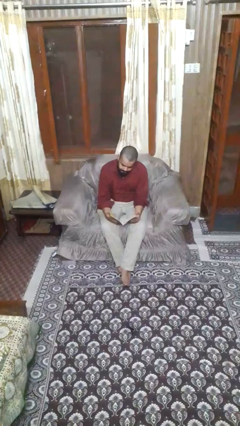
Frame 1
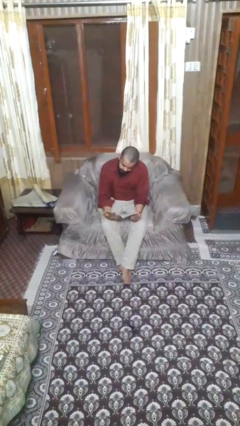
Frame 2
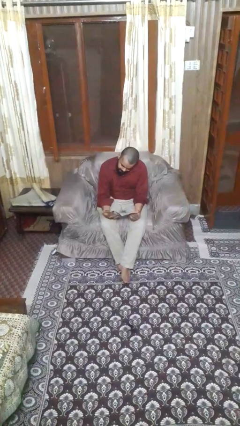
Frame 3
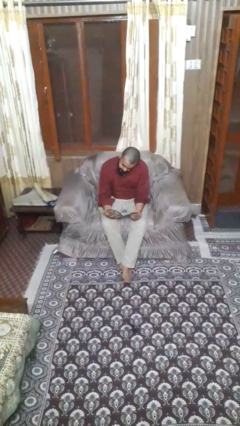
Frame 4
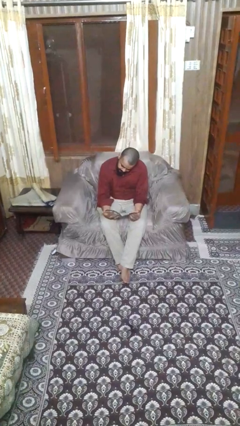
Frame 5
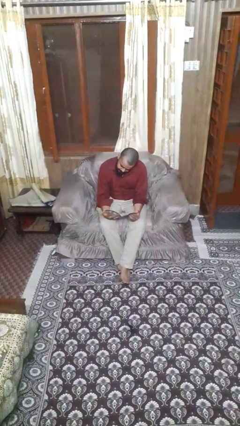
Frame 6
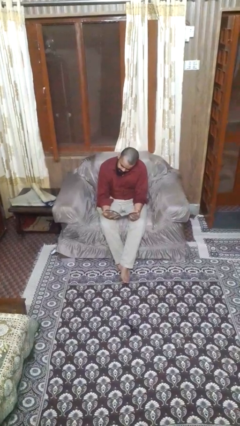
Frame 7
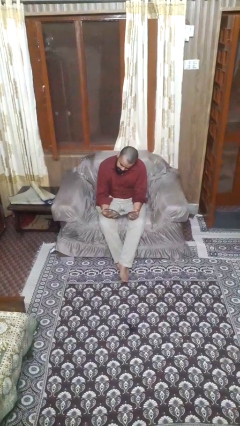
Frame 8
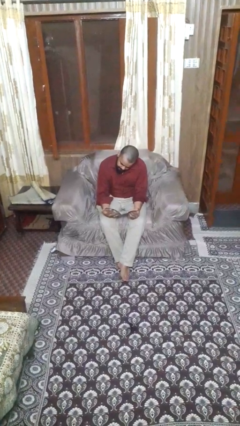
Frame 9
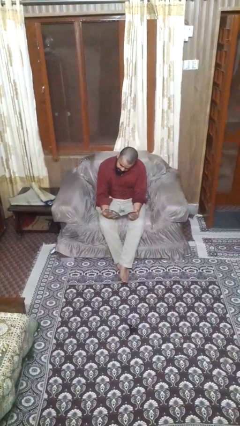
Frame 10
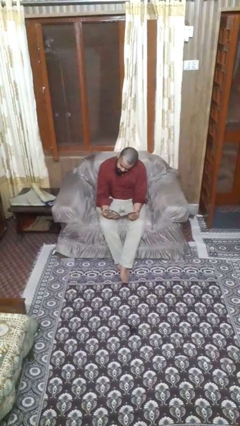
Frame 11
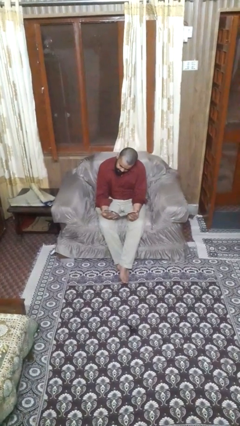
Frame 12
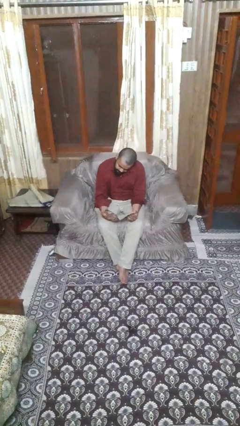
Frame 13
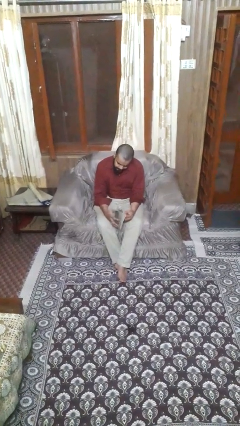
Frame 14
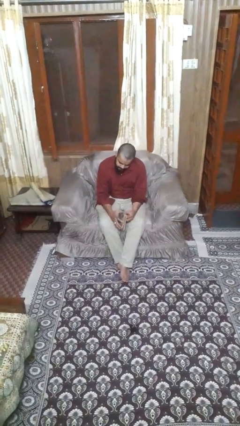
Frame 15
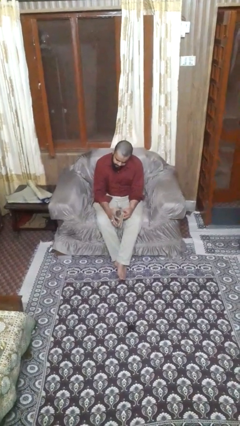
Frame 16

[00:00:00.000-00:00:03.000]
person reads magazine

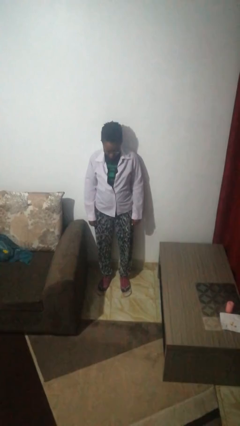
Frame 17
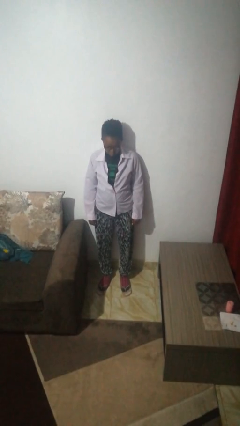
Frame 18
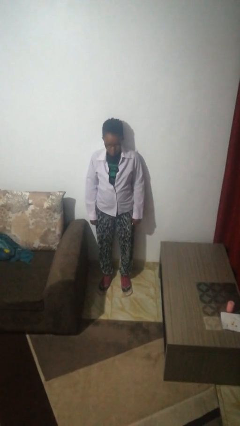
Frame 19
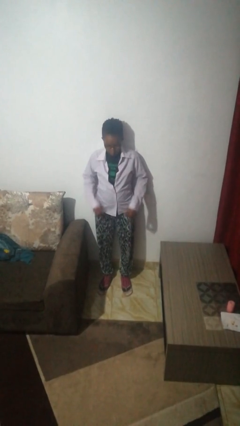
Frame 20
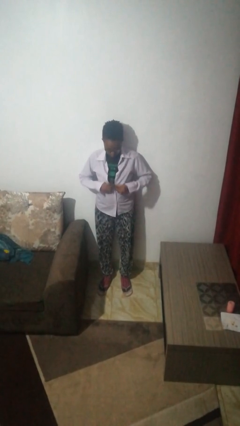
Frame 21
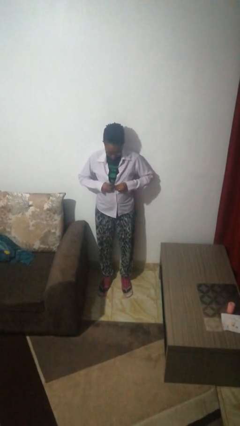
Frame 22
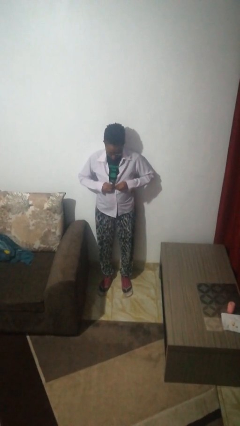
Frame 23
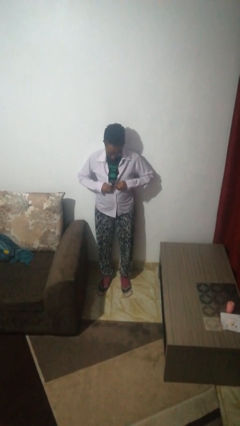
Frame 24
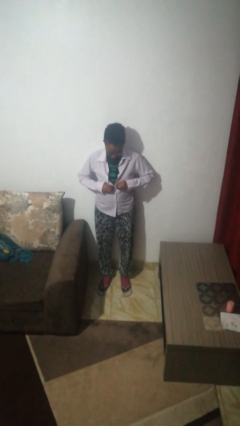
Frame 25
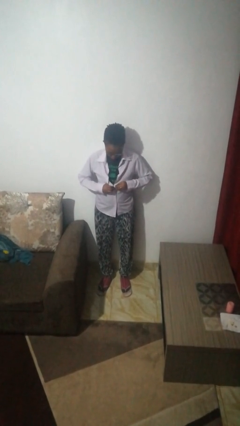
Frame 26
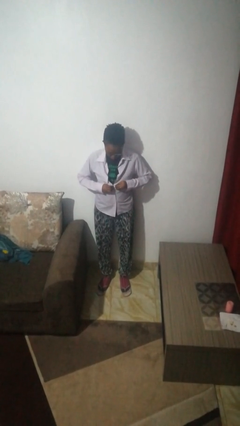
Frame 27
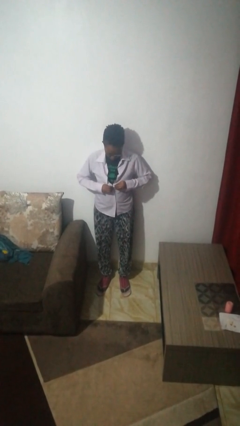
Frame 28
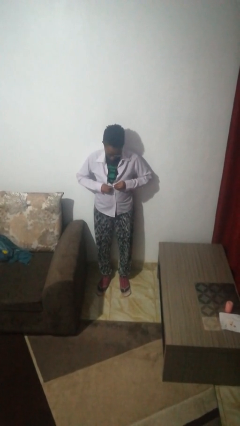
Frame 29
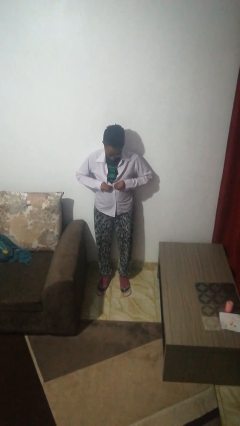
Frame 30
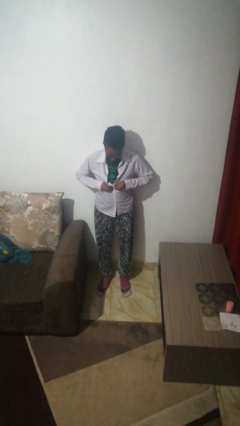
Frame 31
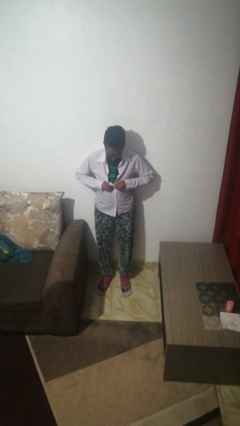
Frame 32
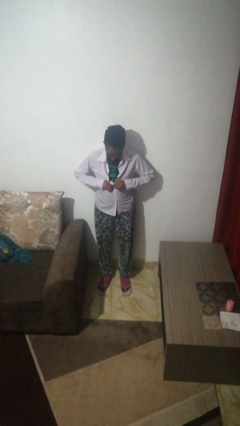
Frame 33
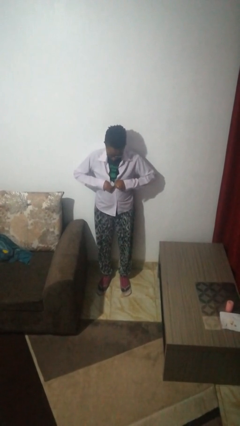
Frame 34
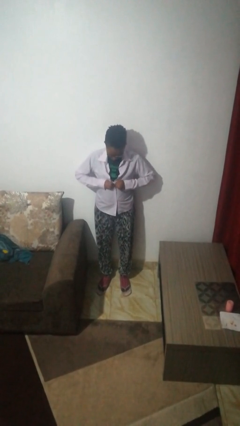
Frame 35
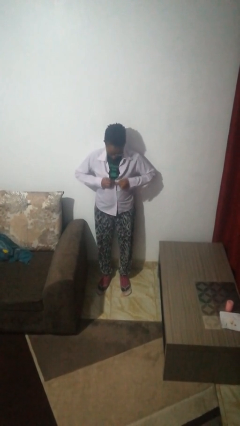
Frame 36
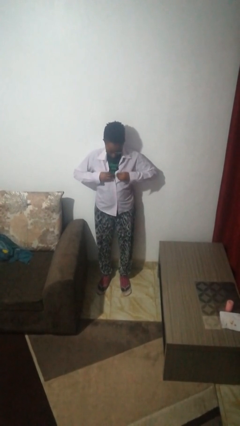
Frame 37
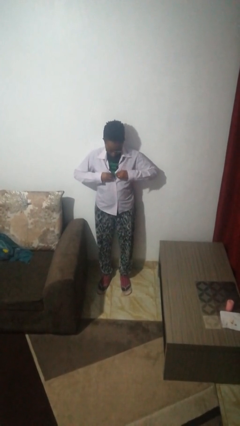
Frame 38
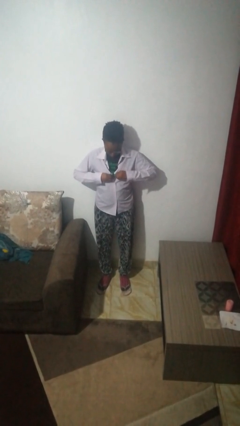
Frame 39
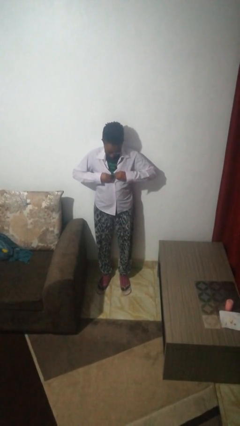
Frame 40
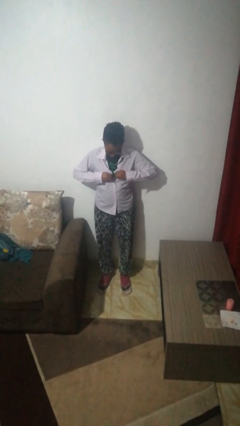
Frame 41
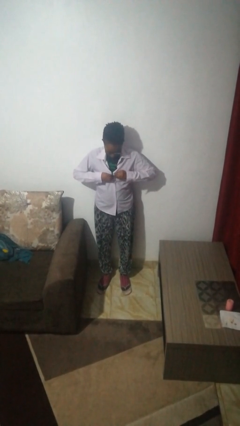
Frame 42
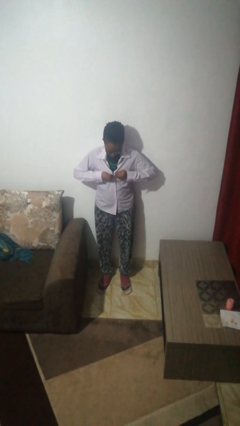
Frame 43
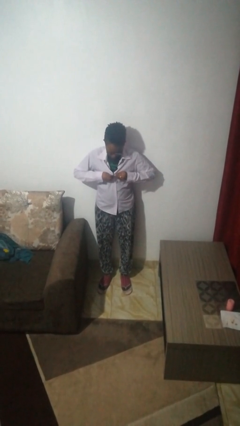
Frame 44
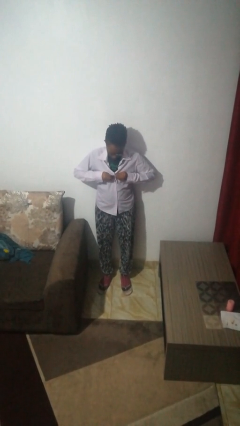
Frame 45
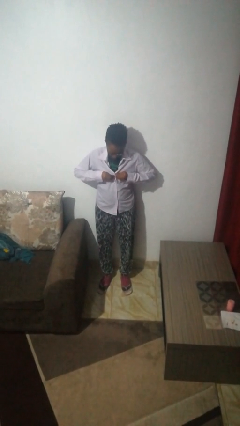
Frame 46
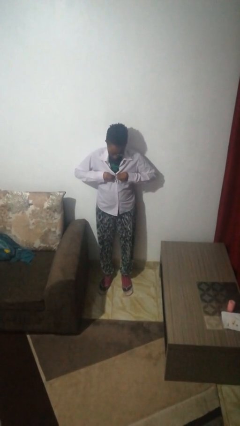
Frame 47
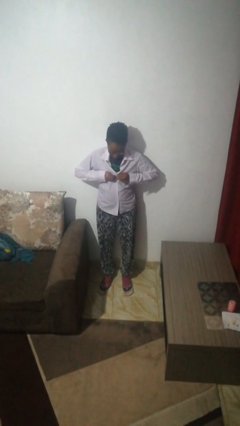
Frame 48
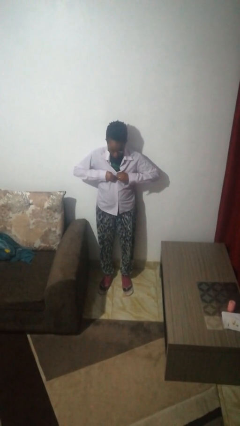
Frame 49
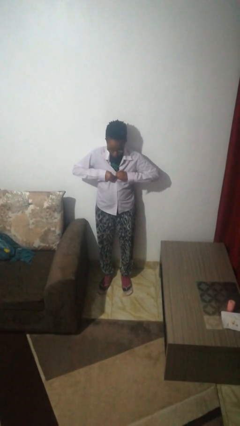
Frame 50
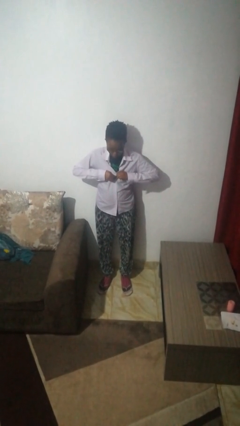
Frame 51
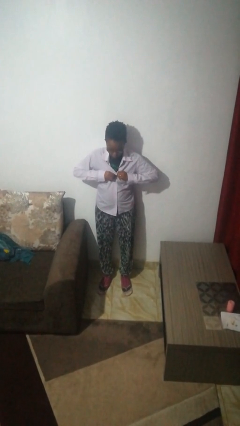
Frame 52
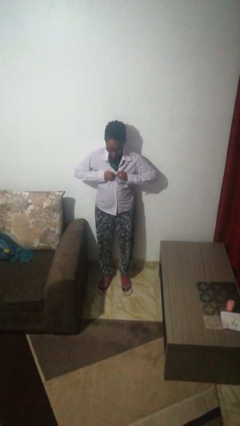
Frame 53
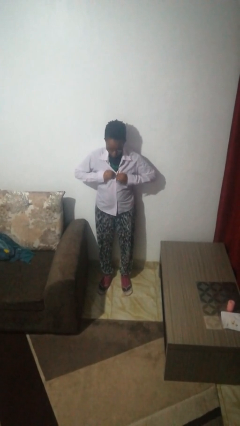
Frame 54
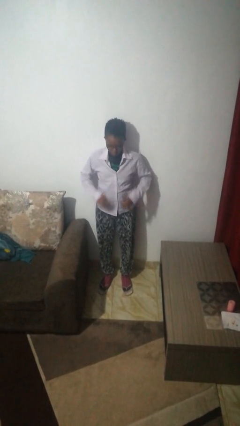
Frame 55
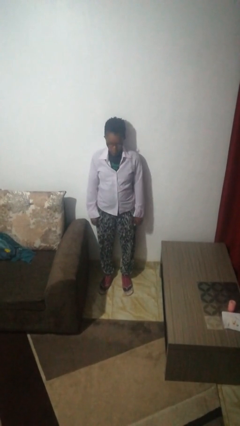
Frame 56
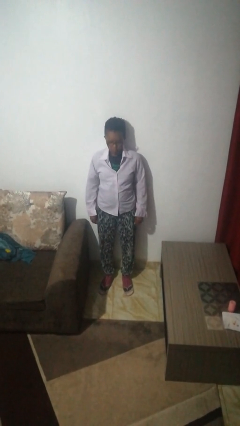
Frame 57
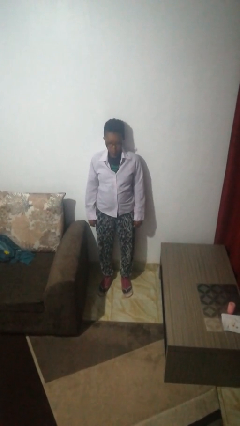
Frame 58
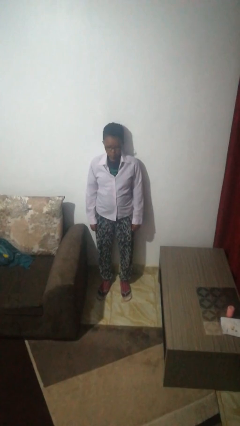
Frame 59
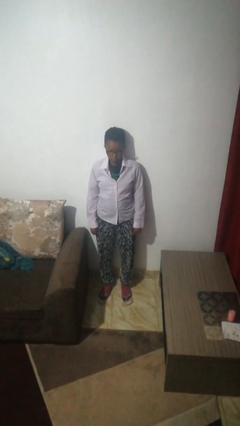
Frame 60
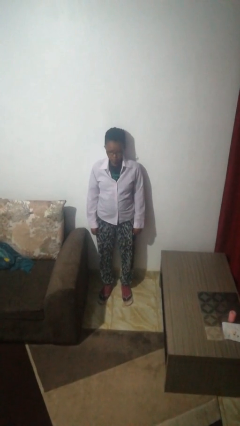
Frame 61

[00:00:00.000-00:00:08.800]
person buttons shirt

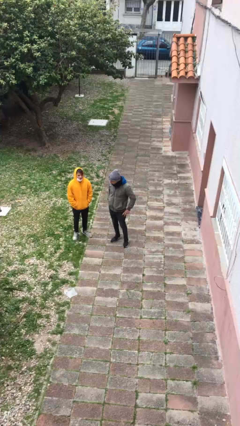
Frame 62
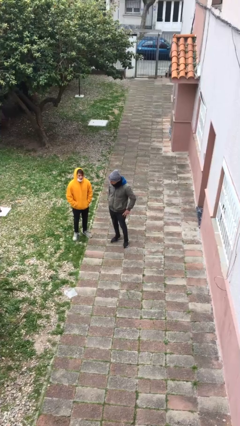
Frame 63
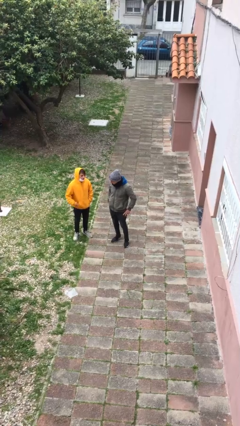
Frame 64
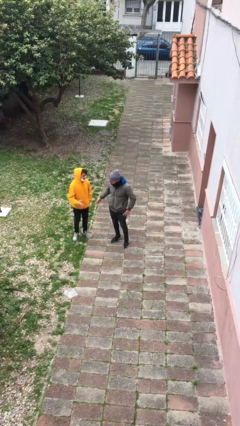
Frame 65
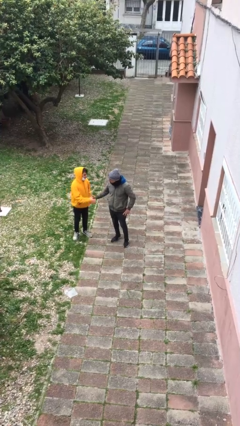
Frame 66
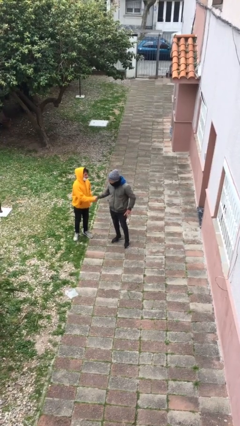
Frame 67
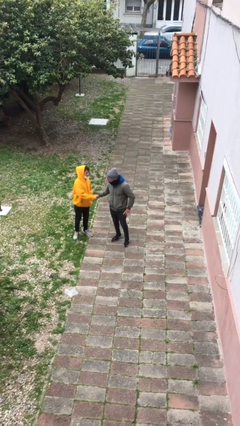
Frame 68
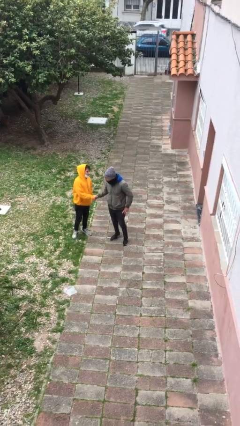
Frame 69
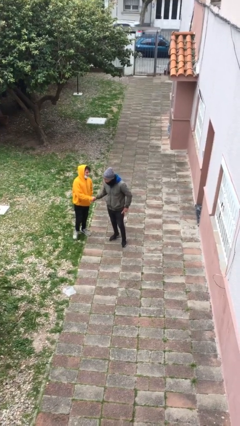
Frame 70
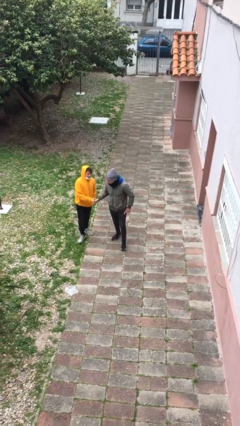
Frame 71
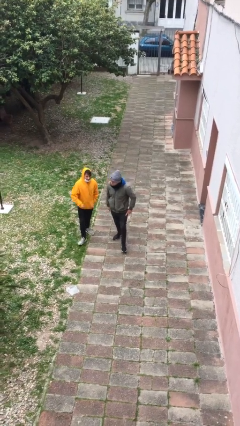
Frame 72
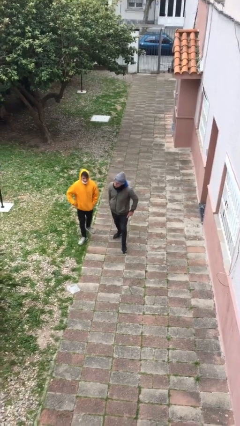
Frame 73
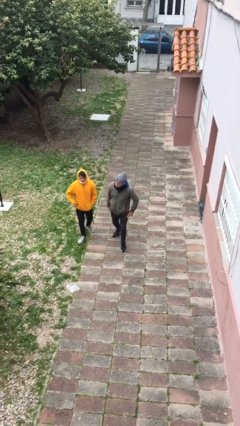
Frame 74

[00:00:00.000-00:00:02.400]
person shakes hand

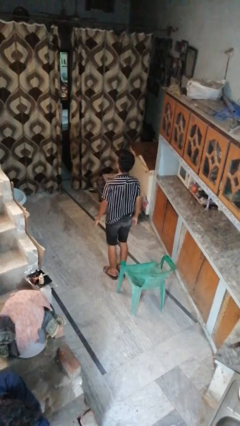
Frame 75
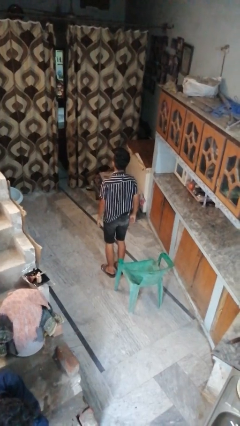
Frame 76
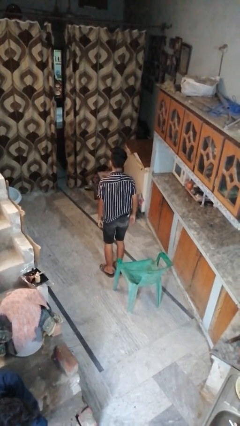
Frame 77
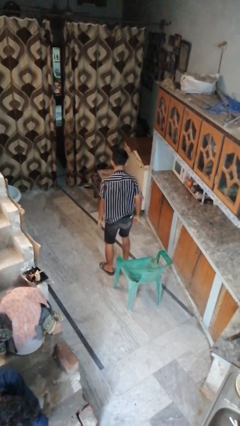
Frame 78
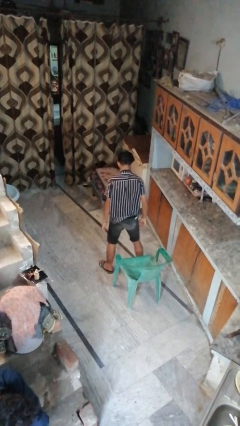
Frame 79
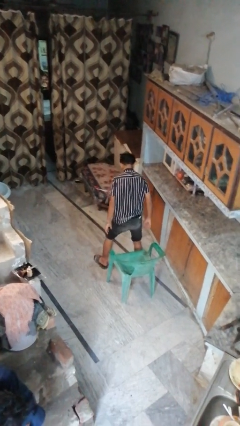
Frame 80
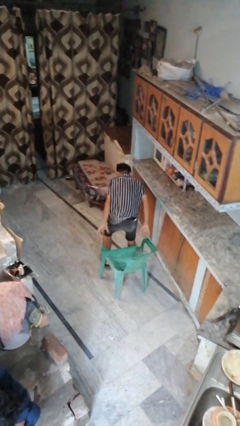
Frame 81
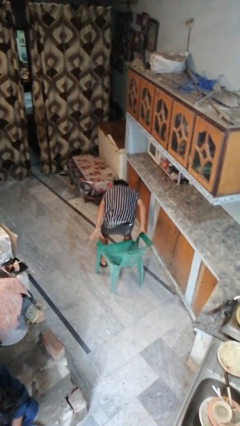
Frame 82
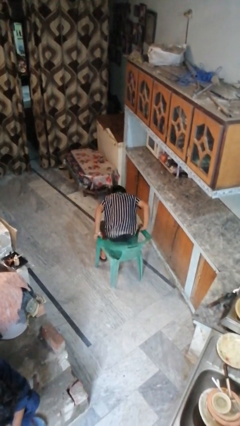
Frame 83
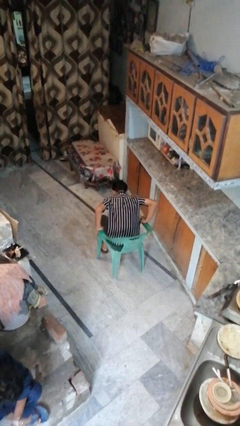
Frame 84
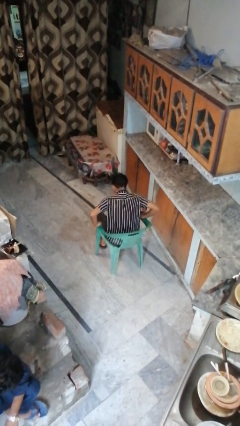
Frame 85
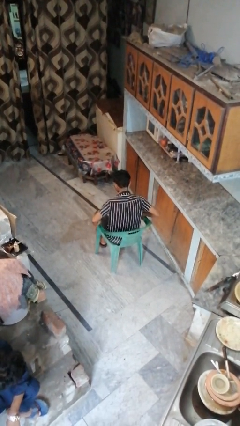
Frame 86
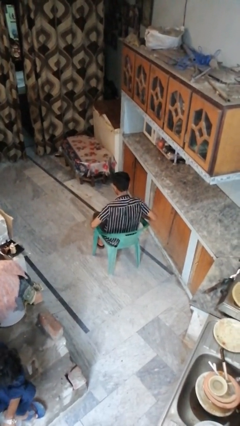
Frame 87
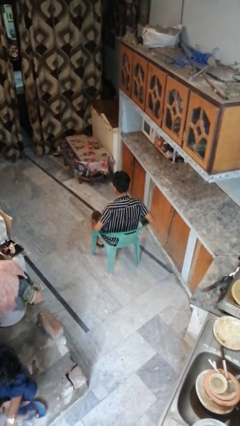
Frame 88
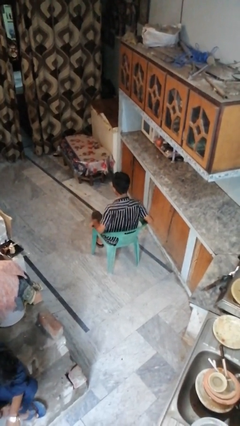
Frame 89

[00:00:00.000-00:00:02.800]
person sits down

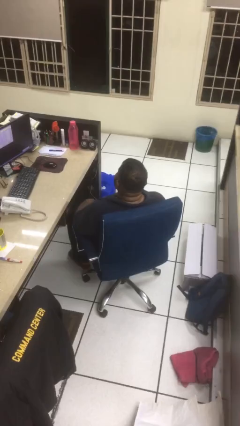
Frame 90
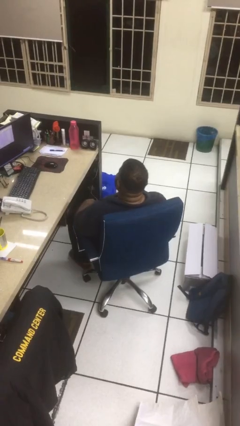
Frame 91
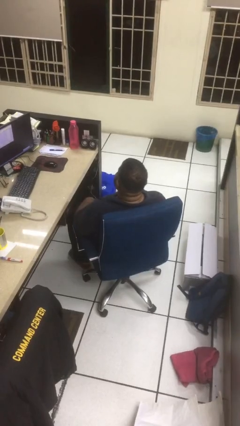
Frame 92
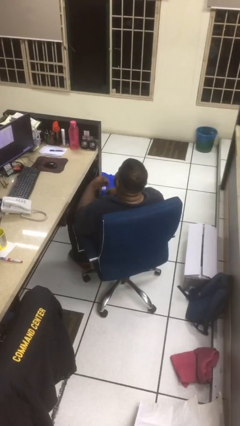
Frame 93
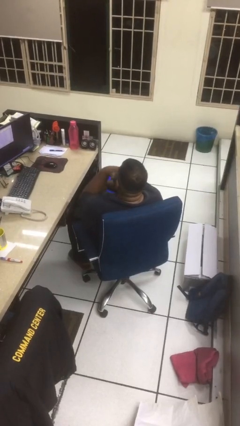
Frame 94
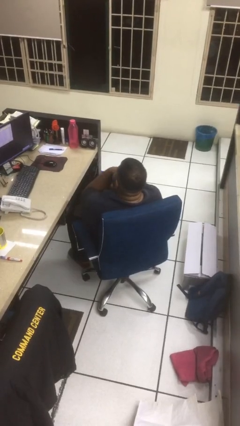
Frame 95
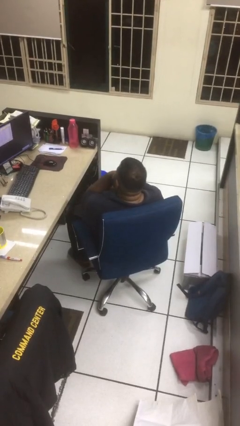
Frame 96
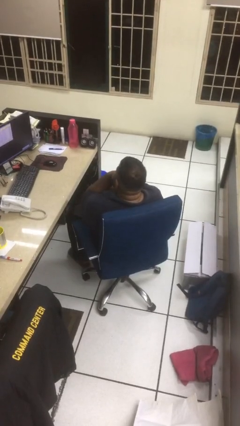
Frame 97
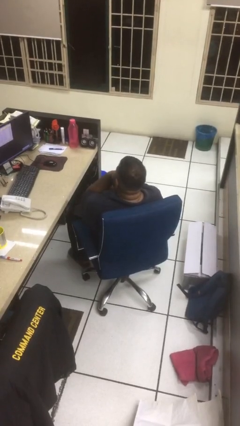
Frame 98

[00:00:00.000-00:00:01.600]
person strokes chin
